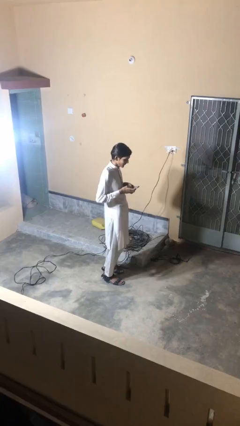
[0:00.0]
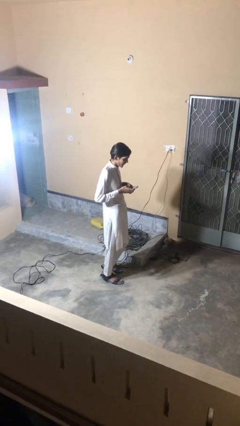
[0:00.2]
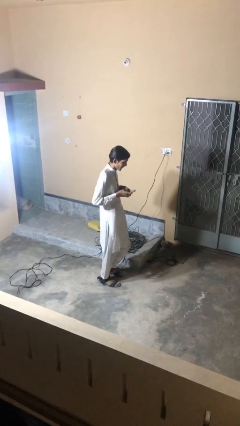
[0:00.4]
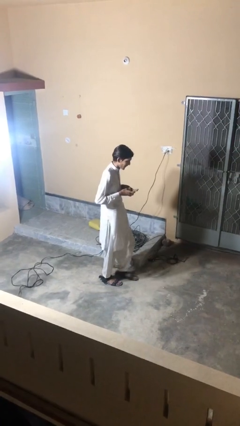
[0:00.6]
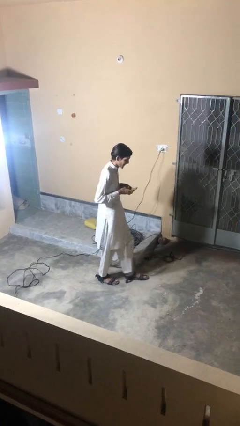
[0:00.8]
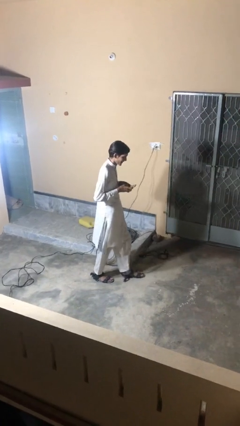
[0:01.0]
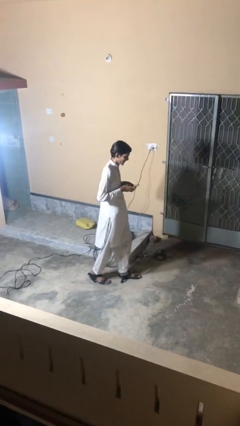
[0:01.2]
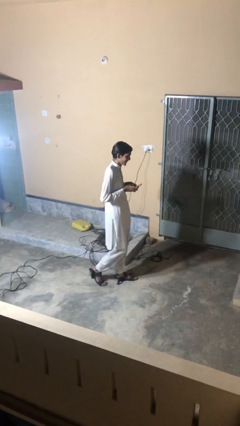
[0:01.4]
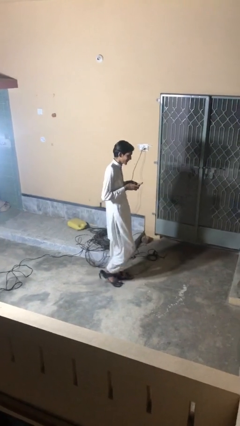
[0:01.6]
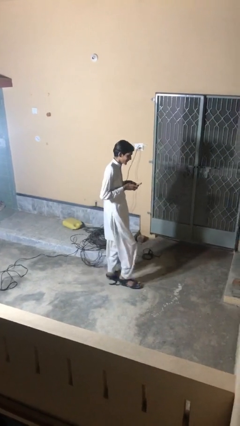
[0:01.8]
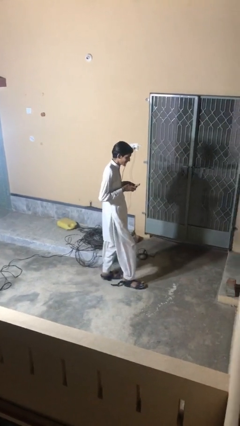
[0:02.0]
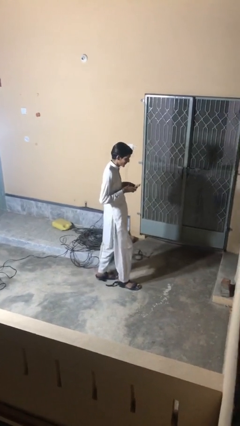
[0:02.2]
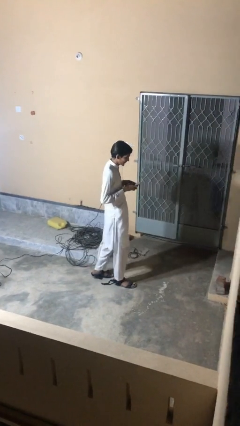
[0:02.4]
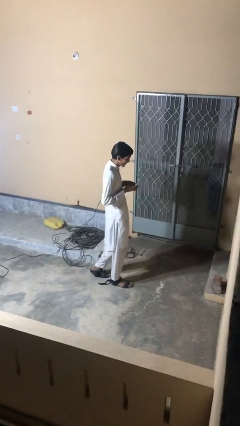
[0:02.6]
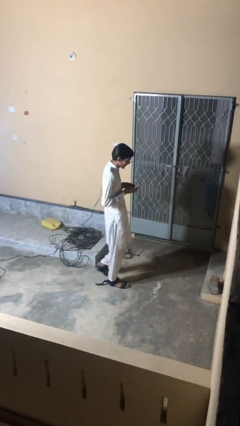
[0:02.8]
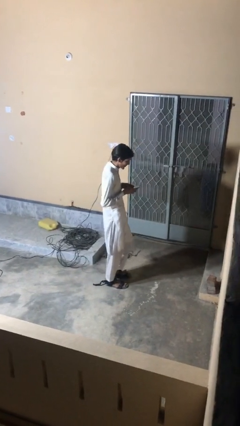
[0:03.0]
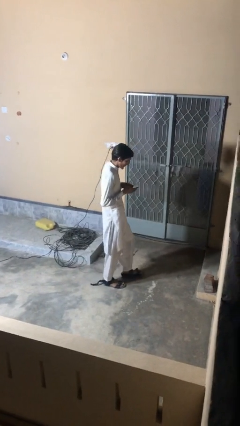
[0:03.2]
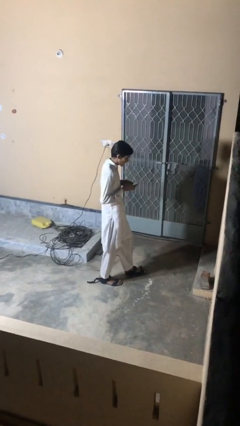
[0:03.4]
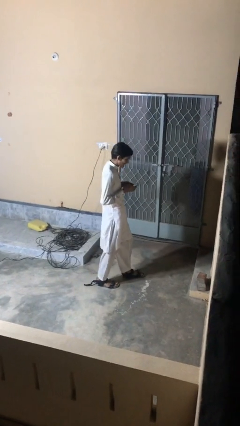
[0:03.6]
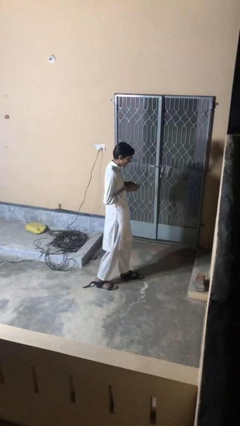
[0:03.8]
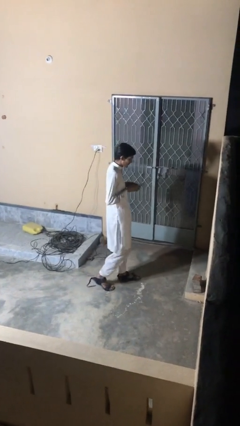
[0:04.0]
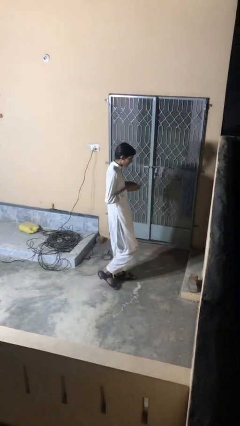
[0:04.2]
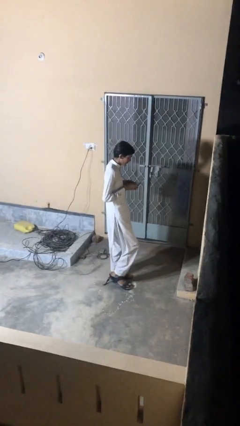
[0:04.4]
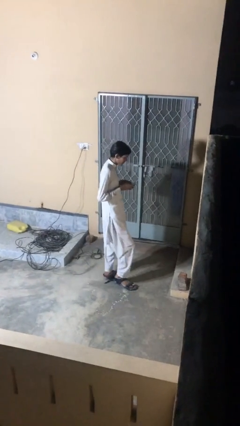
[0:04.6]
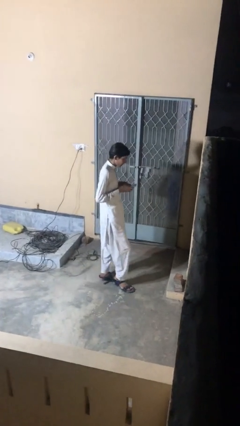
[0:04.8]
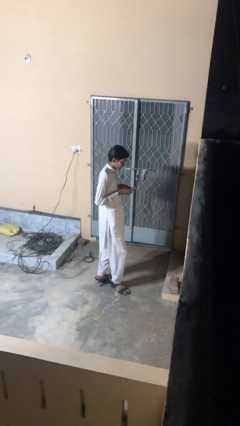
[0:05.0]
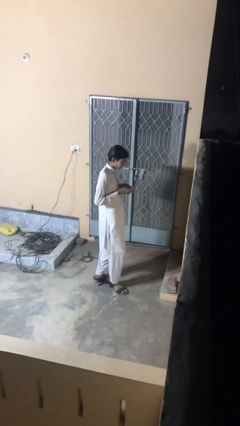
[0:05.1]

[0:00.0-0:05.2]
person texts on phone

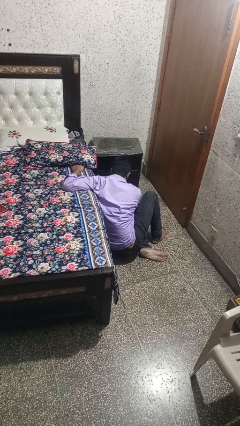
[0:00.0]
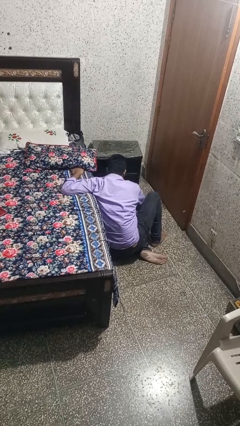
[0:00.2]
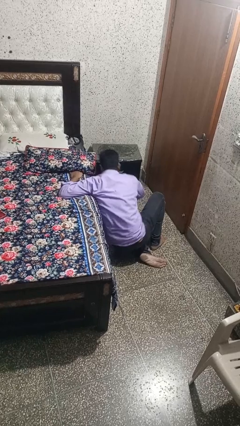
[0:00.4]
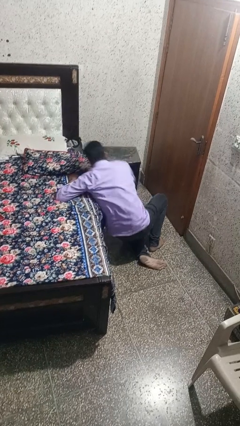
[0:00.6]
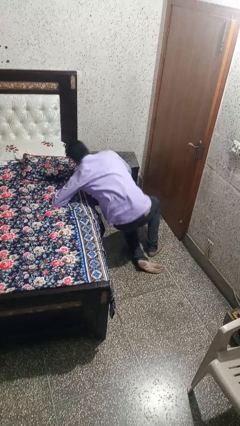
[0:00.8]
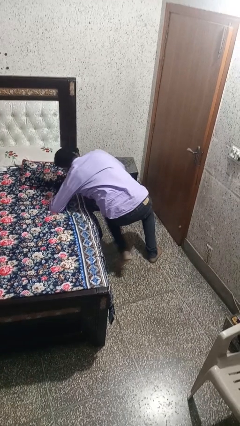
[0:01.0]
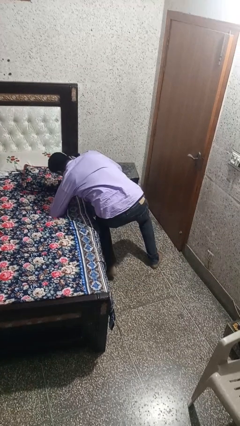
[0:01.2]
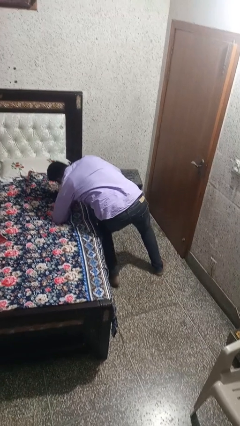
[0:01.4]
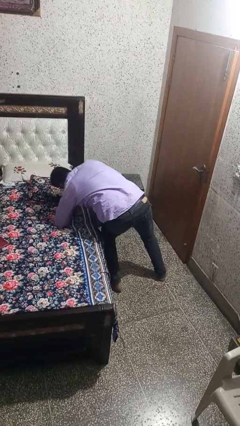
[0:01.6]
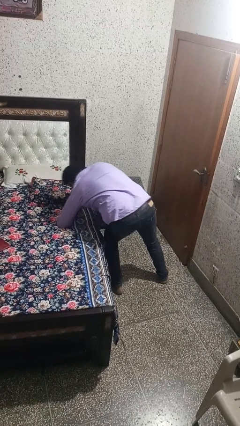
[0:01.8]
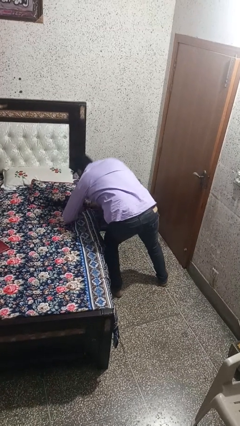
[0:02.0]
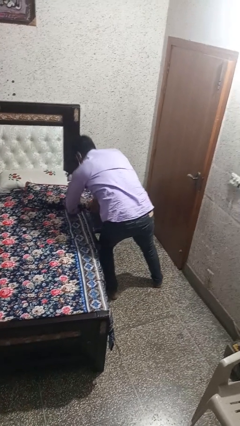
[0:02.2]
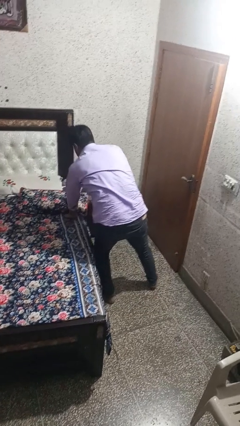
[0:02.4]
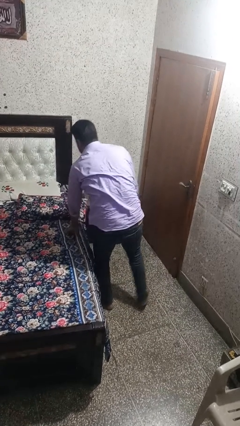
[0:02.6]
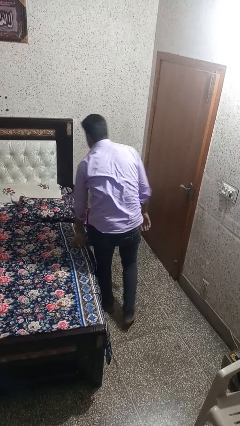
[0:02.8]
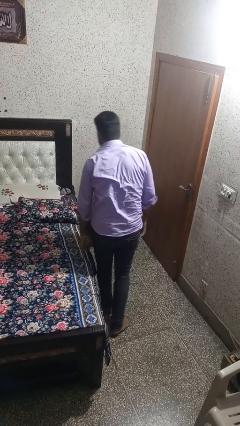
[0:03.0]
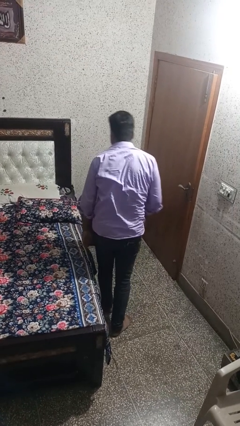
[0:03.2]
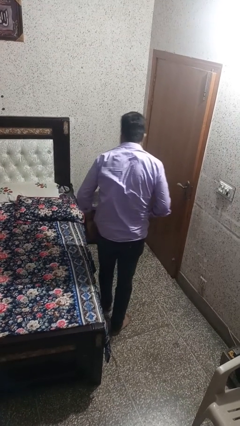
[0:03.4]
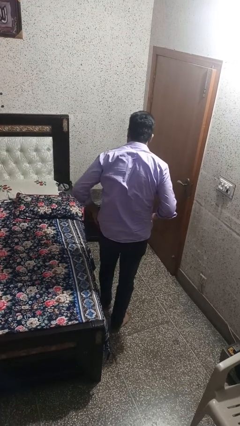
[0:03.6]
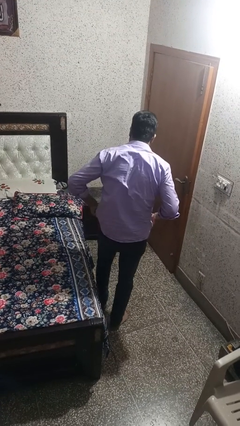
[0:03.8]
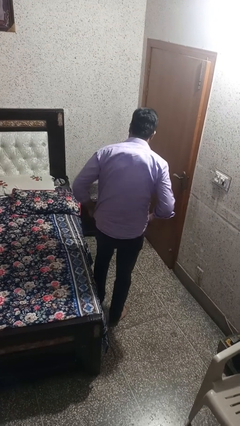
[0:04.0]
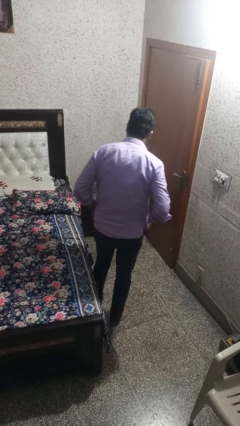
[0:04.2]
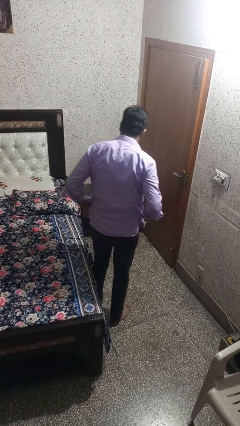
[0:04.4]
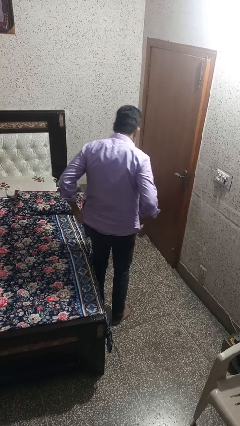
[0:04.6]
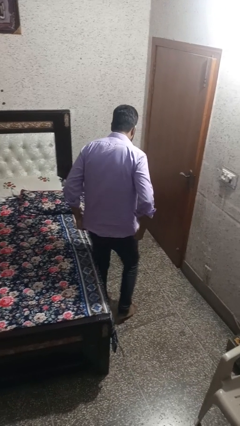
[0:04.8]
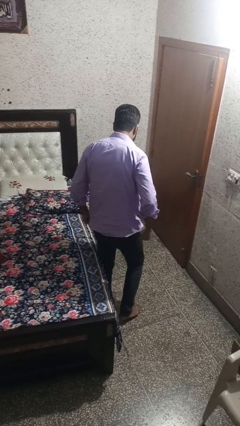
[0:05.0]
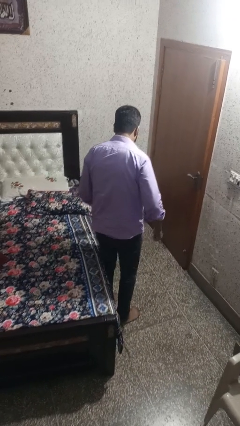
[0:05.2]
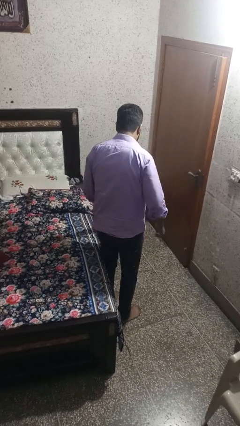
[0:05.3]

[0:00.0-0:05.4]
person stands up from floor

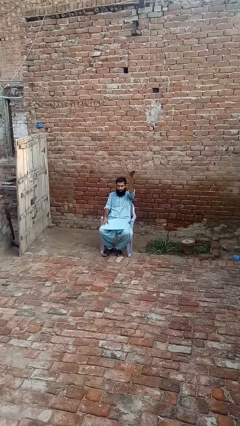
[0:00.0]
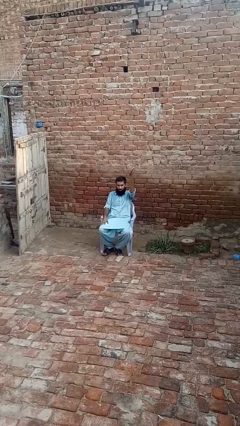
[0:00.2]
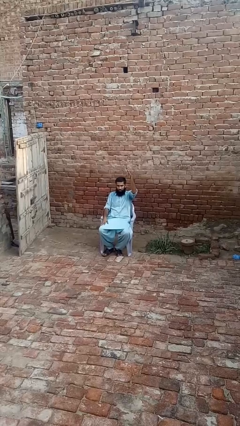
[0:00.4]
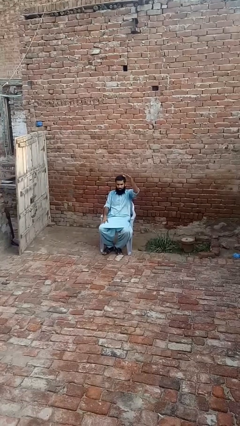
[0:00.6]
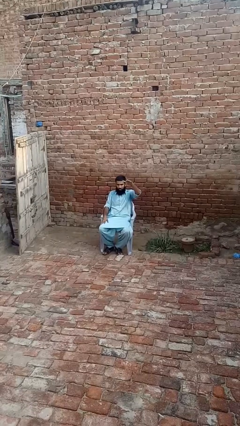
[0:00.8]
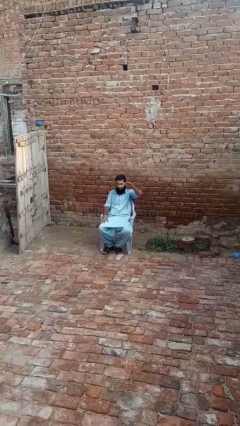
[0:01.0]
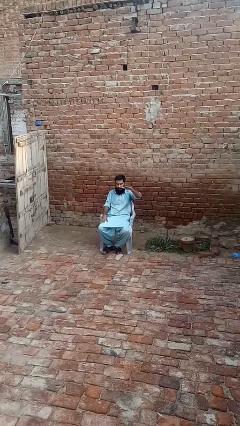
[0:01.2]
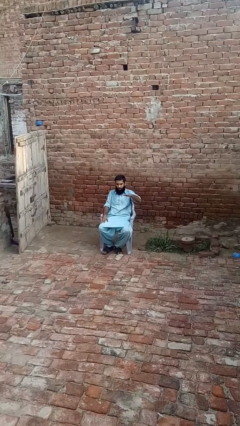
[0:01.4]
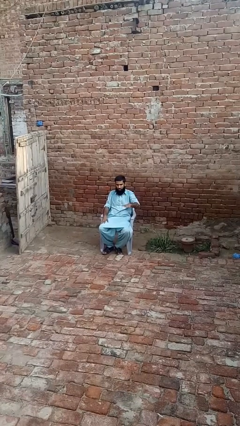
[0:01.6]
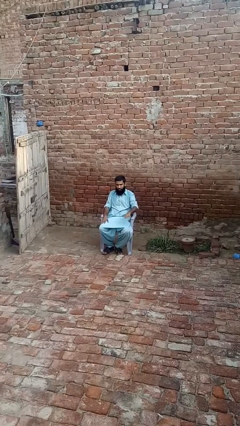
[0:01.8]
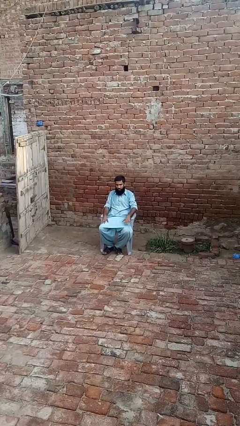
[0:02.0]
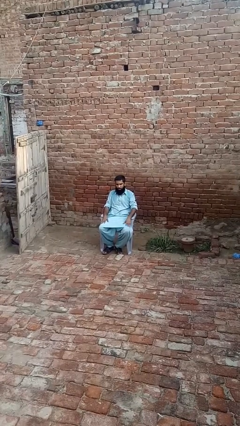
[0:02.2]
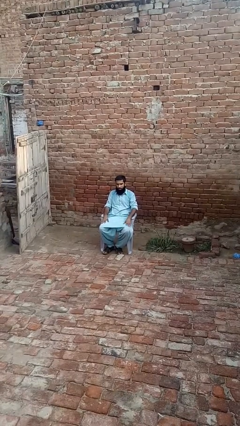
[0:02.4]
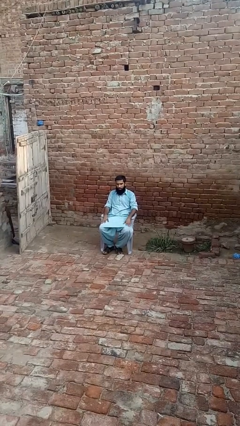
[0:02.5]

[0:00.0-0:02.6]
person gestures swipe down

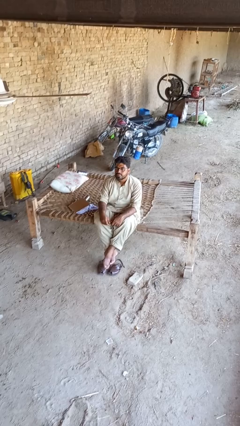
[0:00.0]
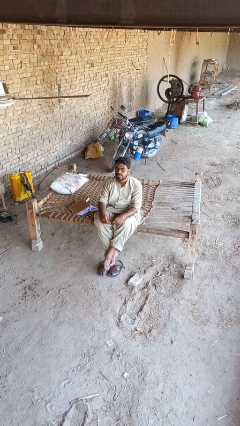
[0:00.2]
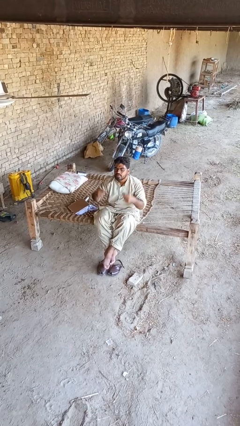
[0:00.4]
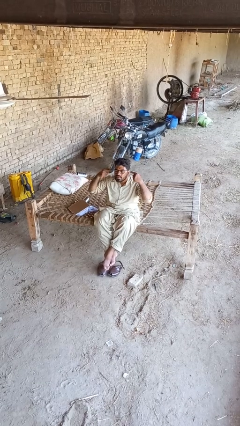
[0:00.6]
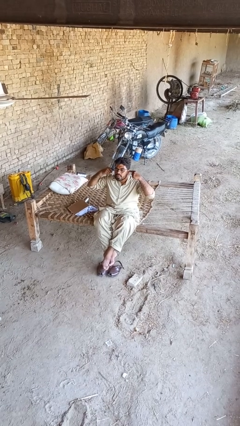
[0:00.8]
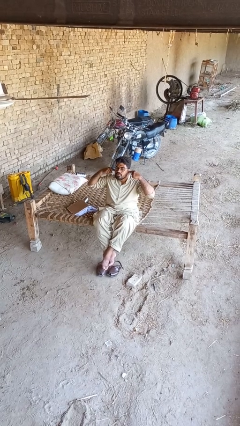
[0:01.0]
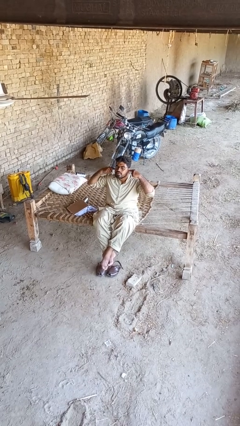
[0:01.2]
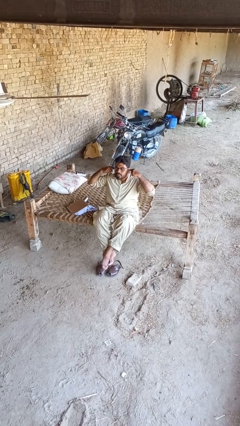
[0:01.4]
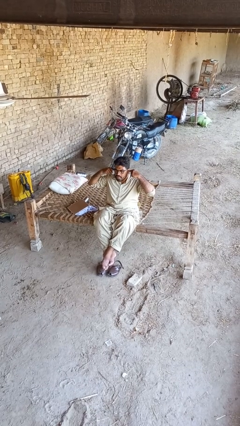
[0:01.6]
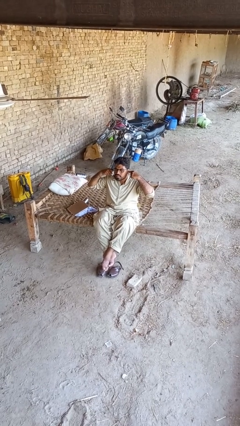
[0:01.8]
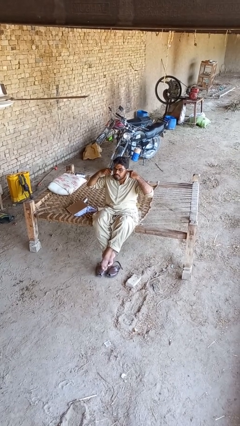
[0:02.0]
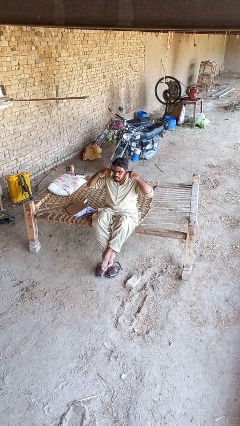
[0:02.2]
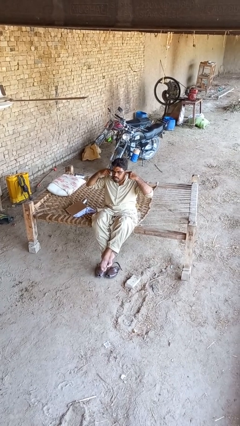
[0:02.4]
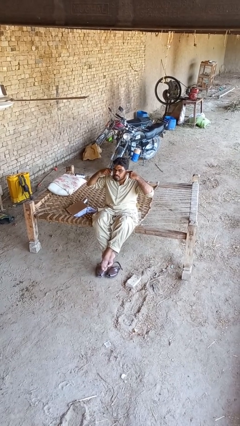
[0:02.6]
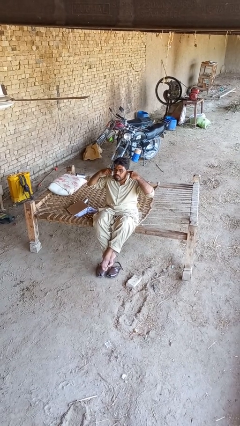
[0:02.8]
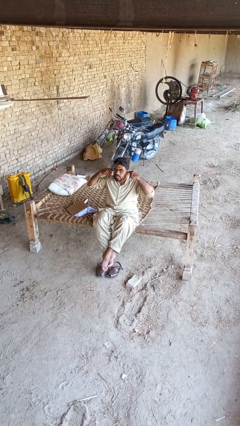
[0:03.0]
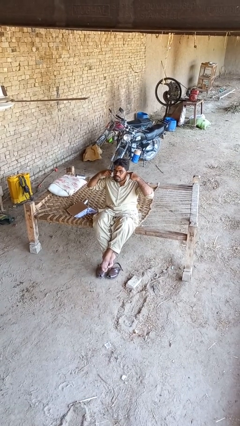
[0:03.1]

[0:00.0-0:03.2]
person puts fingers in ear

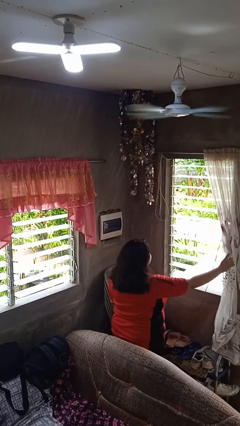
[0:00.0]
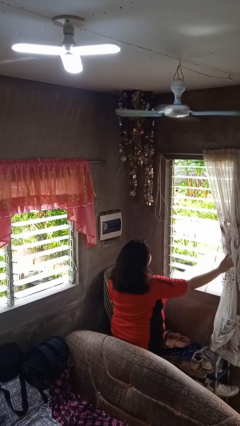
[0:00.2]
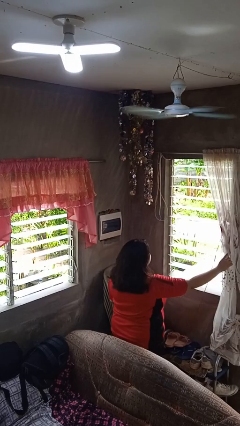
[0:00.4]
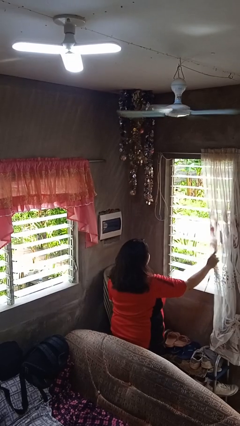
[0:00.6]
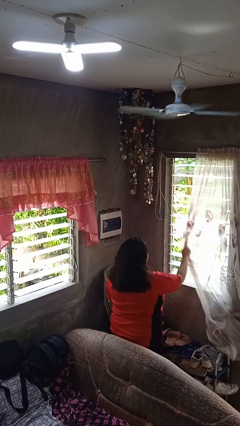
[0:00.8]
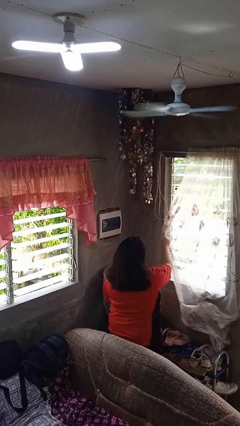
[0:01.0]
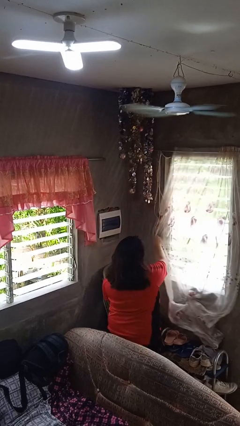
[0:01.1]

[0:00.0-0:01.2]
person closes curtains

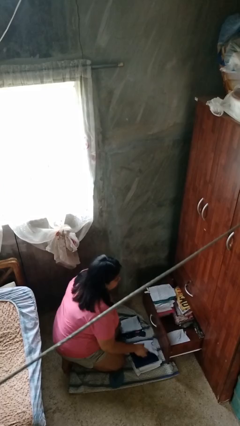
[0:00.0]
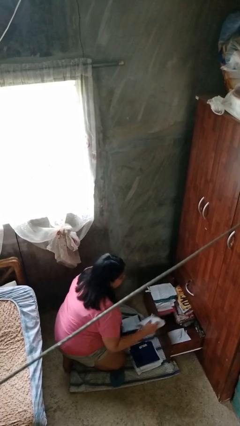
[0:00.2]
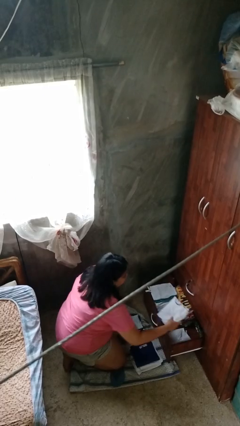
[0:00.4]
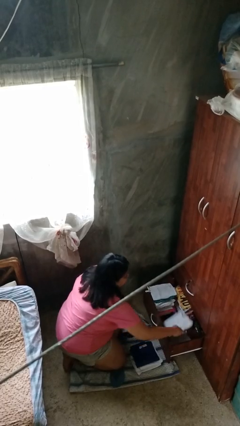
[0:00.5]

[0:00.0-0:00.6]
person puts clothes into dresser
